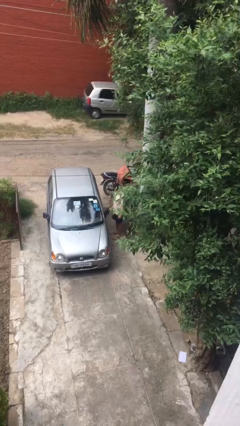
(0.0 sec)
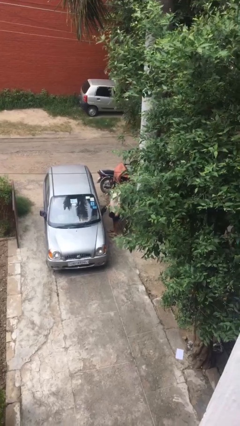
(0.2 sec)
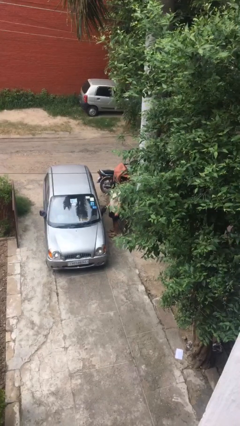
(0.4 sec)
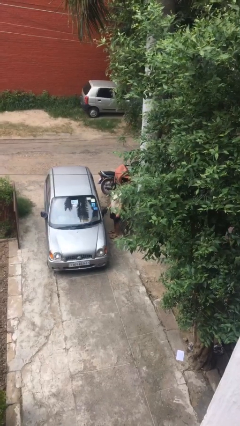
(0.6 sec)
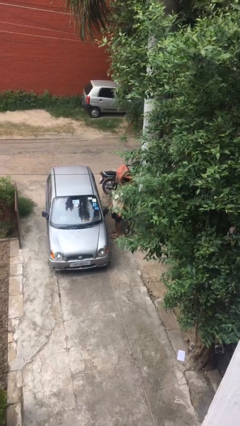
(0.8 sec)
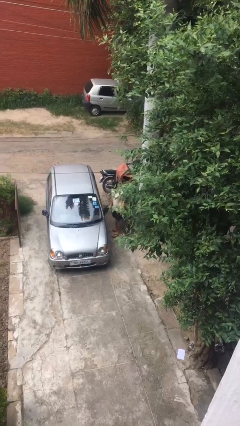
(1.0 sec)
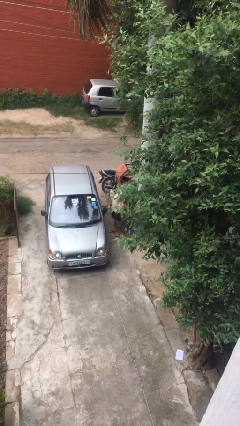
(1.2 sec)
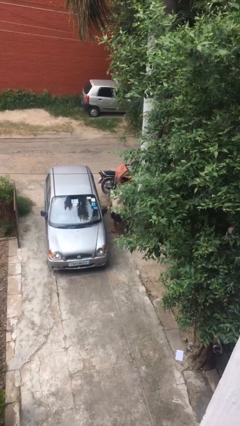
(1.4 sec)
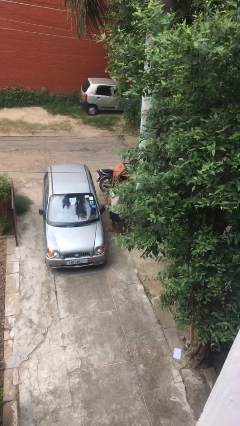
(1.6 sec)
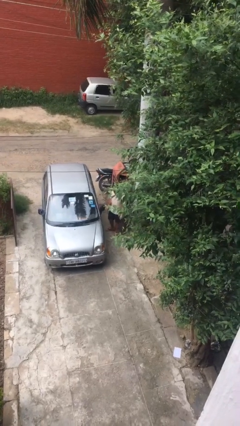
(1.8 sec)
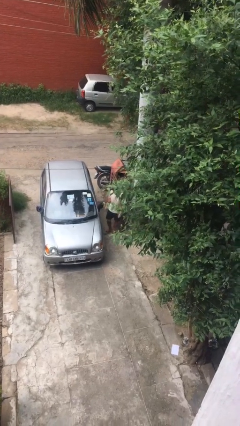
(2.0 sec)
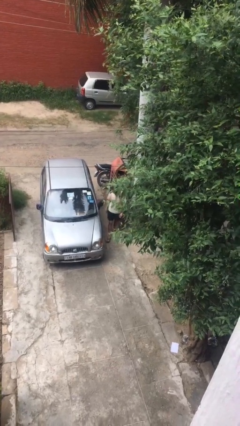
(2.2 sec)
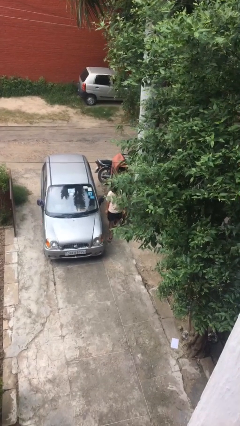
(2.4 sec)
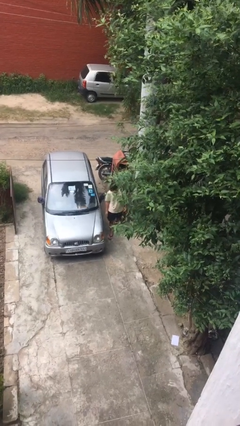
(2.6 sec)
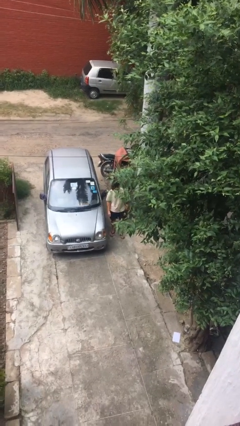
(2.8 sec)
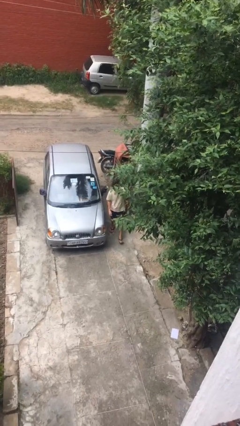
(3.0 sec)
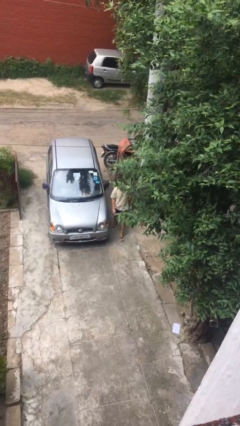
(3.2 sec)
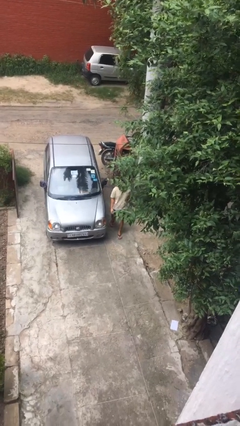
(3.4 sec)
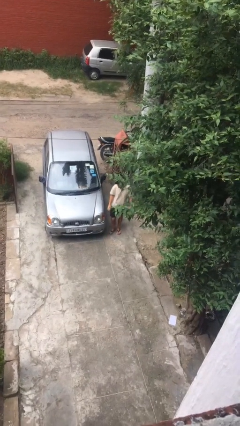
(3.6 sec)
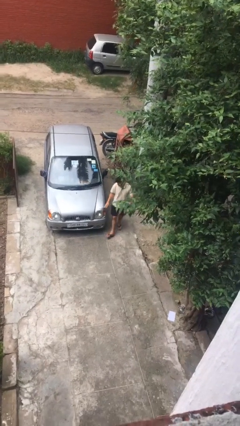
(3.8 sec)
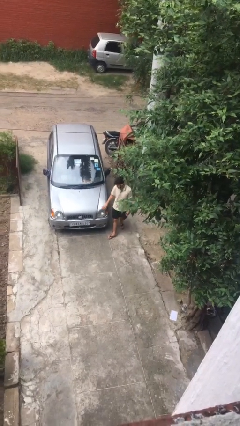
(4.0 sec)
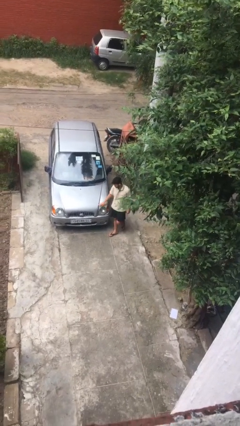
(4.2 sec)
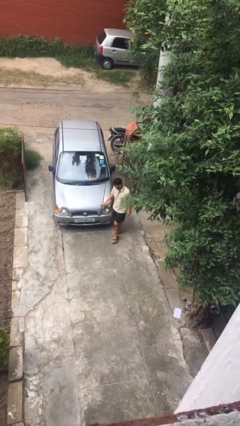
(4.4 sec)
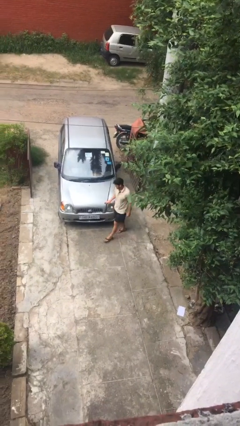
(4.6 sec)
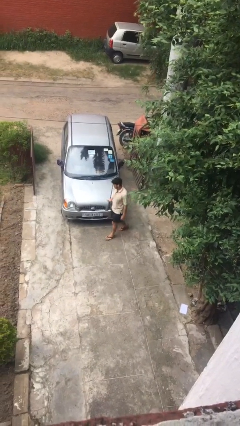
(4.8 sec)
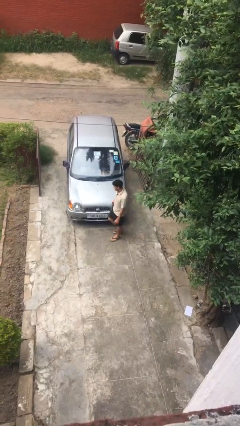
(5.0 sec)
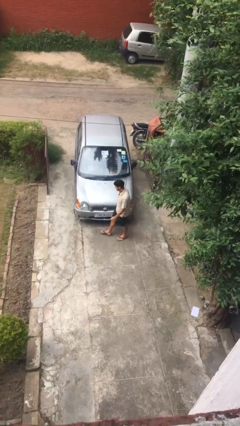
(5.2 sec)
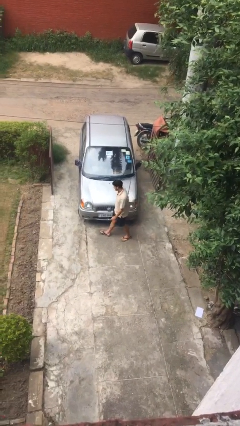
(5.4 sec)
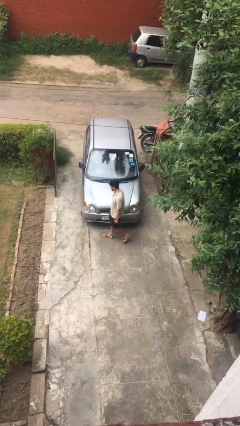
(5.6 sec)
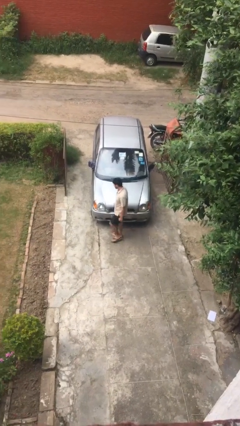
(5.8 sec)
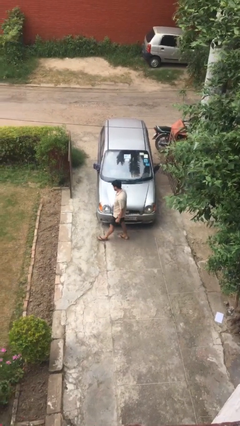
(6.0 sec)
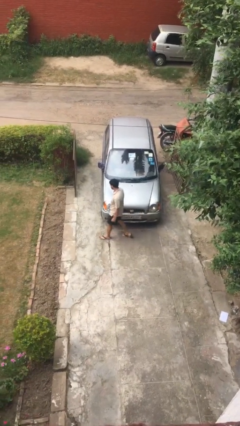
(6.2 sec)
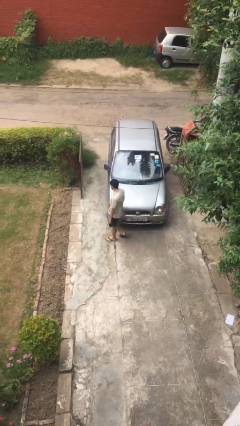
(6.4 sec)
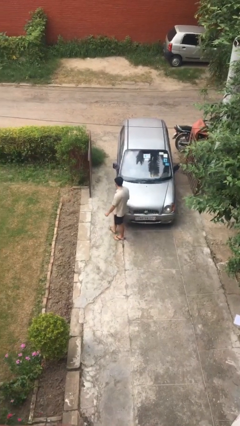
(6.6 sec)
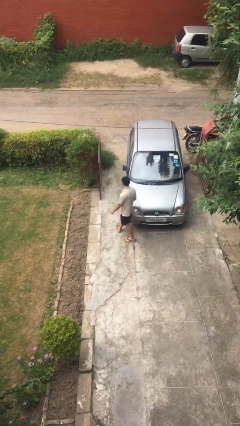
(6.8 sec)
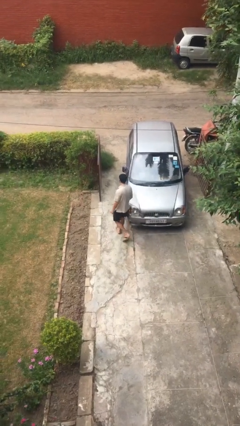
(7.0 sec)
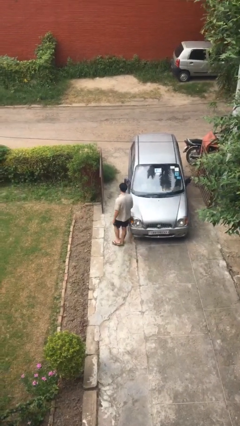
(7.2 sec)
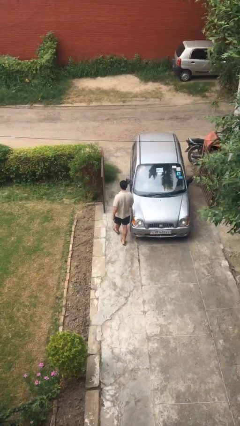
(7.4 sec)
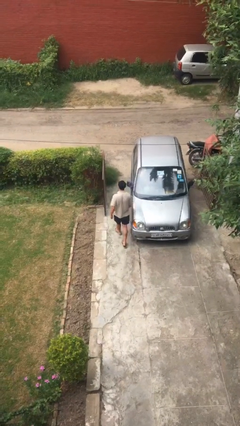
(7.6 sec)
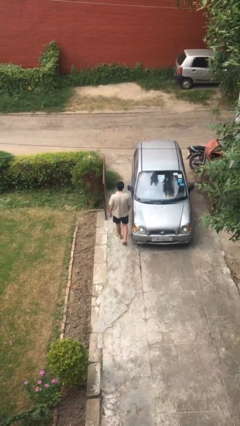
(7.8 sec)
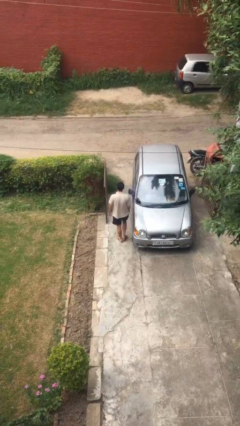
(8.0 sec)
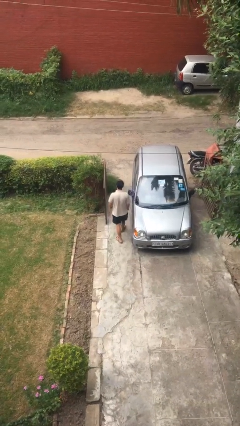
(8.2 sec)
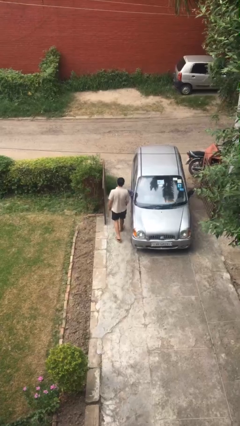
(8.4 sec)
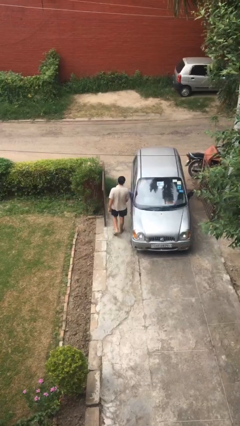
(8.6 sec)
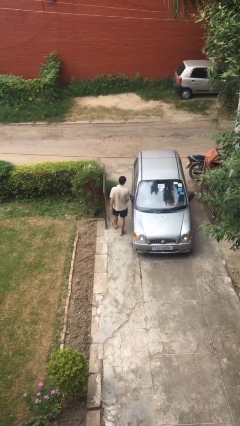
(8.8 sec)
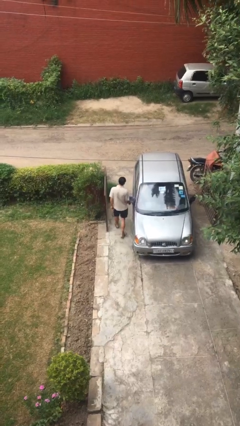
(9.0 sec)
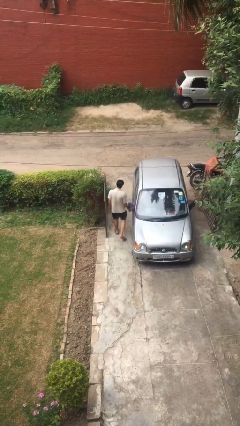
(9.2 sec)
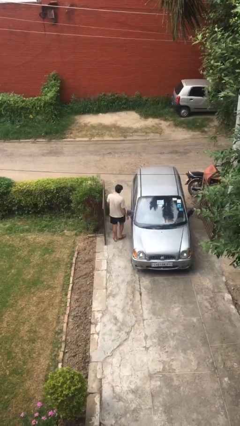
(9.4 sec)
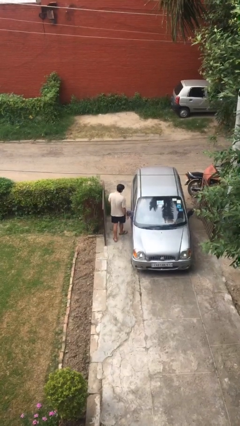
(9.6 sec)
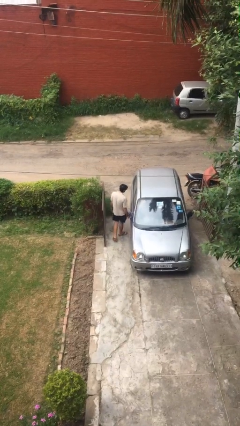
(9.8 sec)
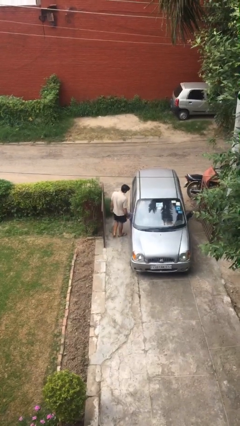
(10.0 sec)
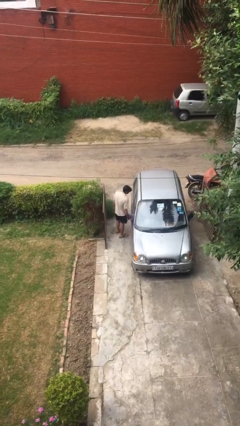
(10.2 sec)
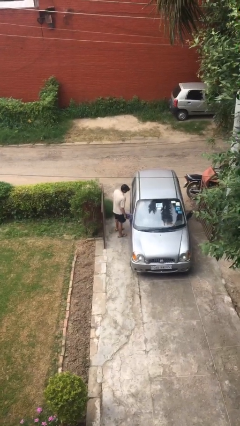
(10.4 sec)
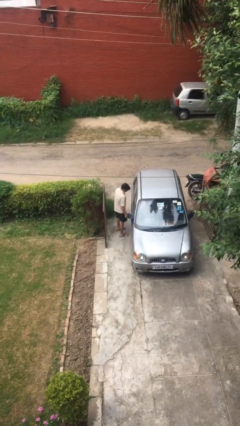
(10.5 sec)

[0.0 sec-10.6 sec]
person walks around car

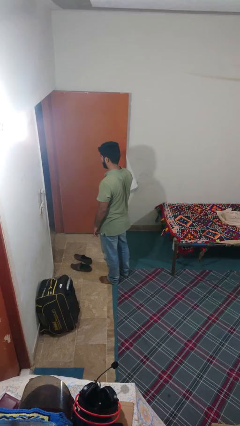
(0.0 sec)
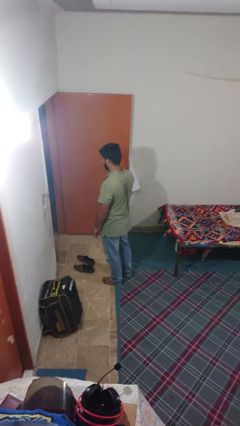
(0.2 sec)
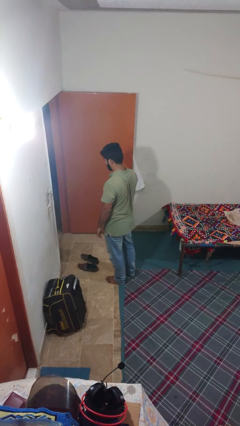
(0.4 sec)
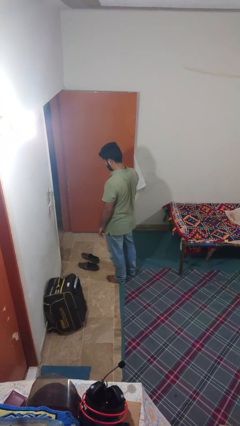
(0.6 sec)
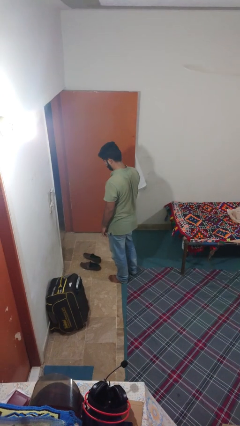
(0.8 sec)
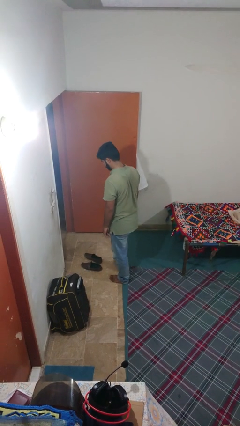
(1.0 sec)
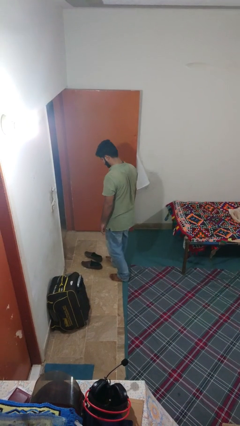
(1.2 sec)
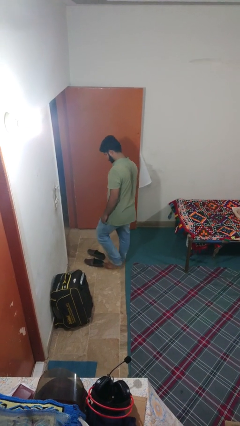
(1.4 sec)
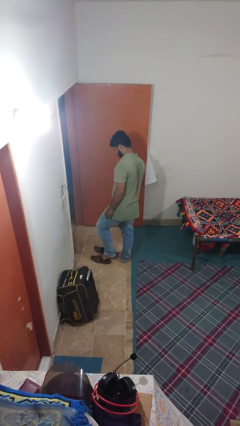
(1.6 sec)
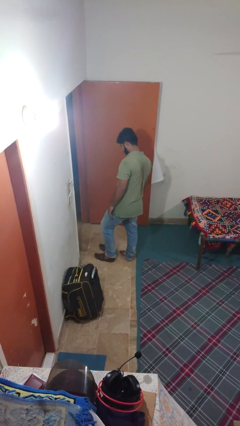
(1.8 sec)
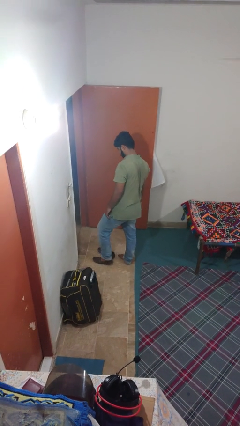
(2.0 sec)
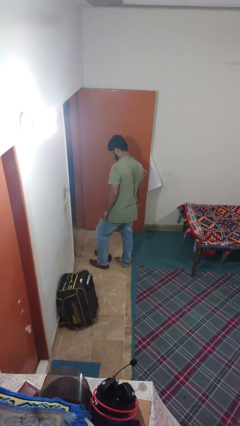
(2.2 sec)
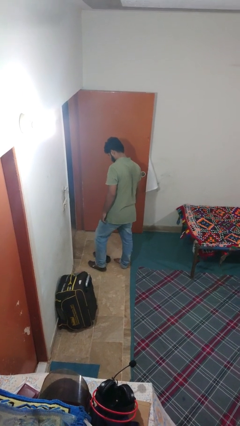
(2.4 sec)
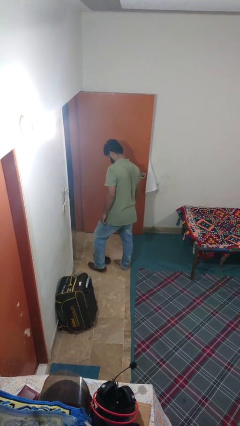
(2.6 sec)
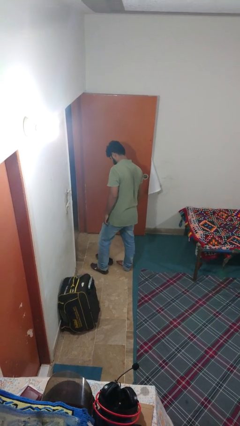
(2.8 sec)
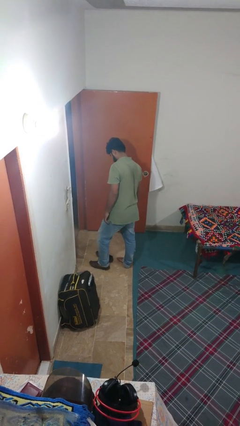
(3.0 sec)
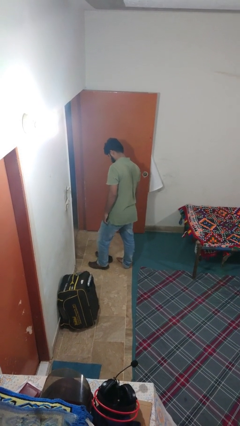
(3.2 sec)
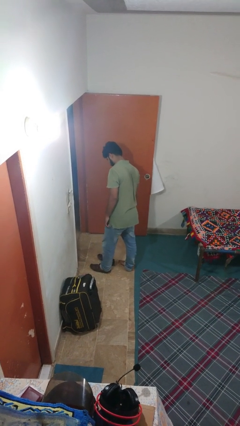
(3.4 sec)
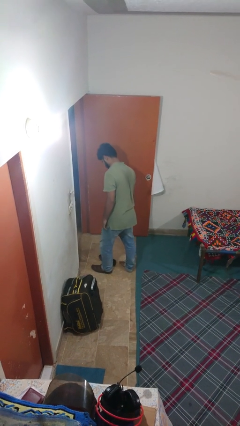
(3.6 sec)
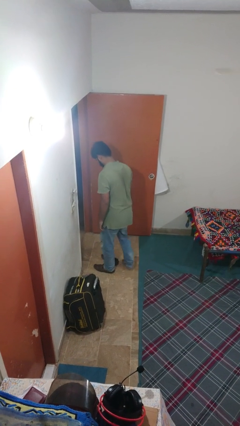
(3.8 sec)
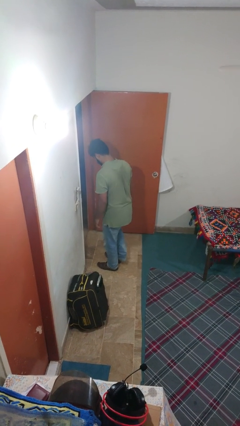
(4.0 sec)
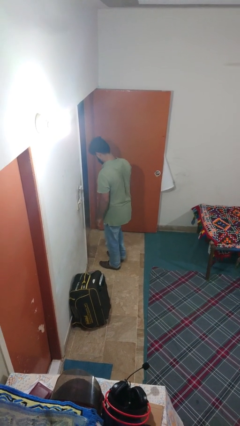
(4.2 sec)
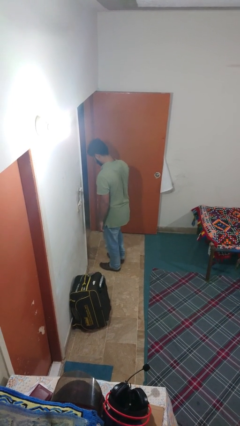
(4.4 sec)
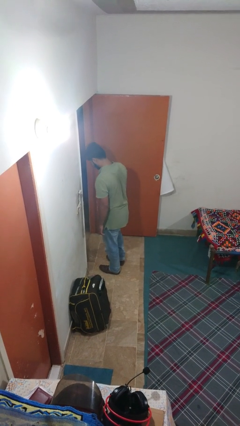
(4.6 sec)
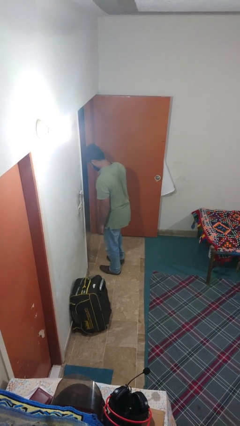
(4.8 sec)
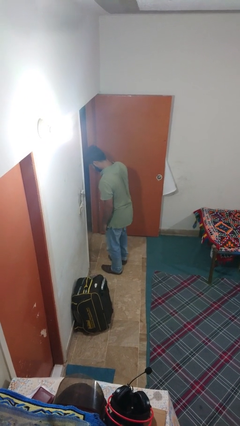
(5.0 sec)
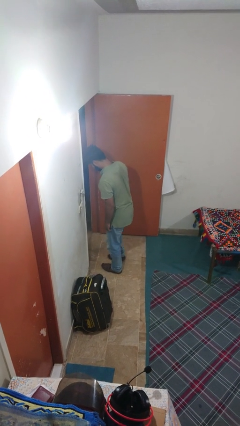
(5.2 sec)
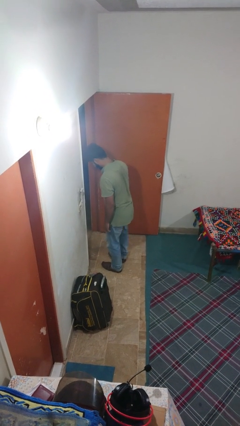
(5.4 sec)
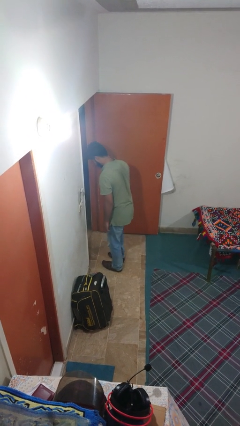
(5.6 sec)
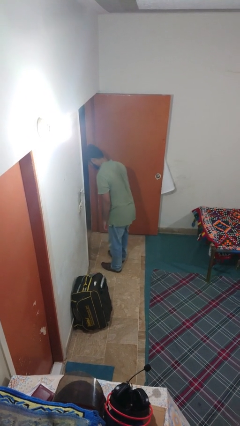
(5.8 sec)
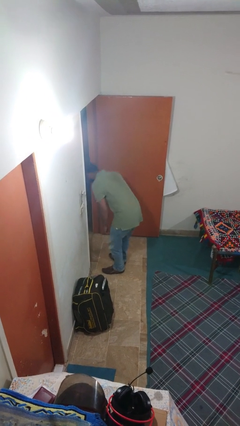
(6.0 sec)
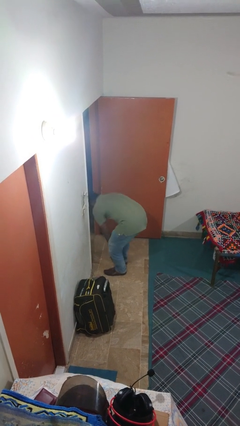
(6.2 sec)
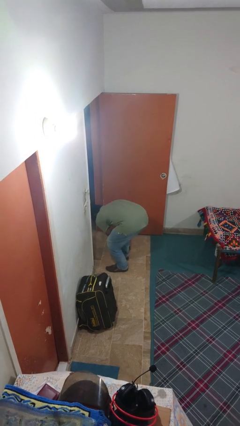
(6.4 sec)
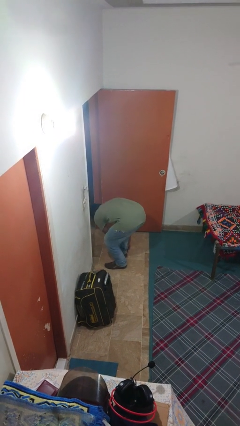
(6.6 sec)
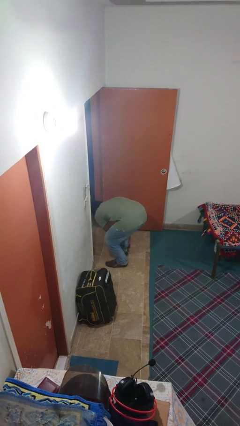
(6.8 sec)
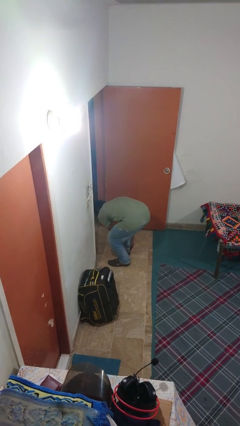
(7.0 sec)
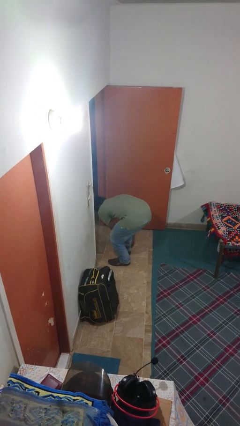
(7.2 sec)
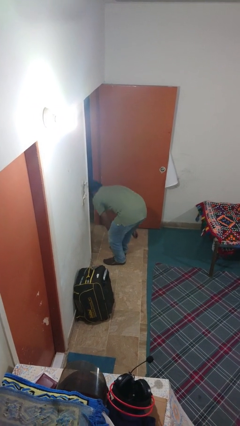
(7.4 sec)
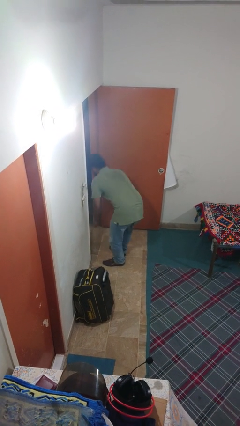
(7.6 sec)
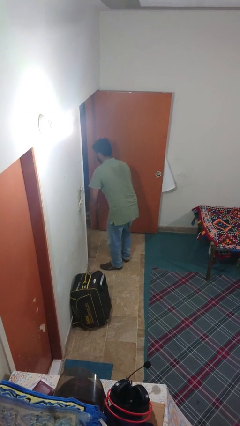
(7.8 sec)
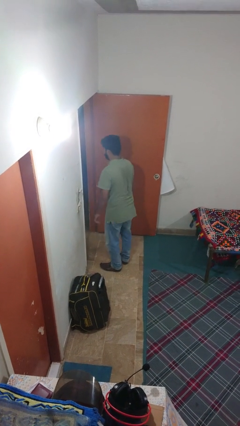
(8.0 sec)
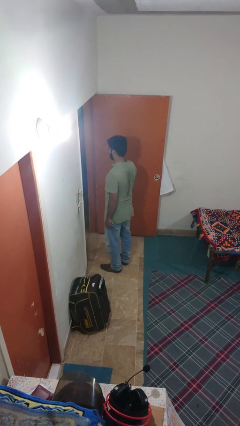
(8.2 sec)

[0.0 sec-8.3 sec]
person puts on shoes
